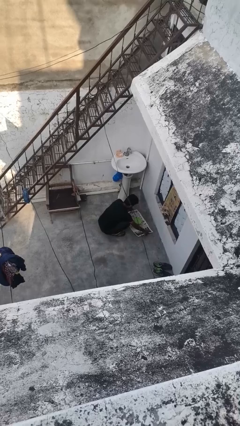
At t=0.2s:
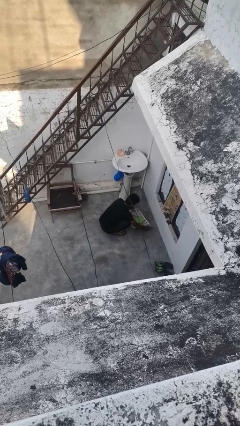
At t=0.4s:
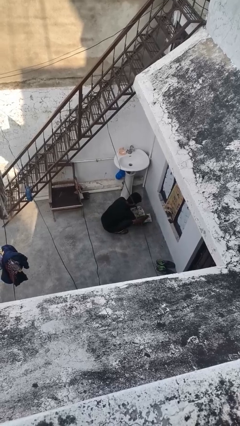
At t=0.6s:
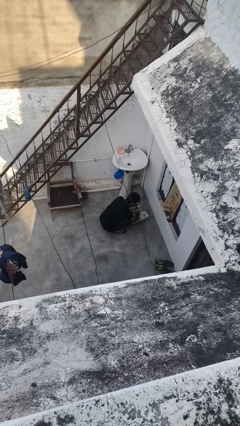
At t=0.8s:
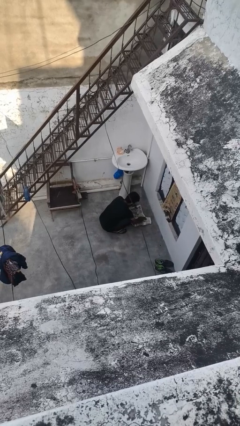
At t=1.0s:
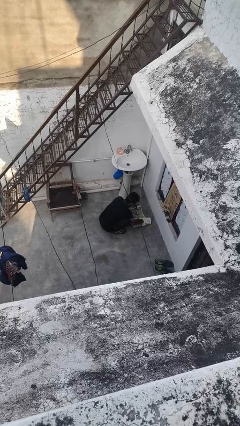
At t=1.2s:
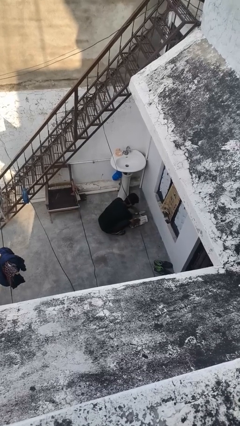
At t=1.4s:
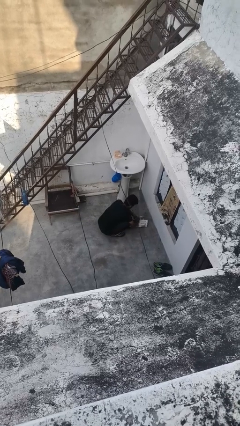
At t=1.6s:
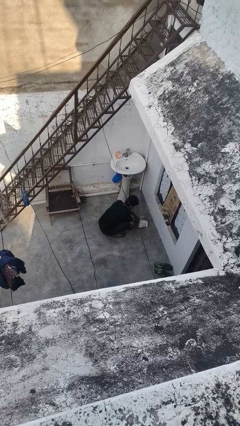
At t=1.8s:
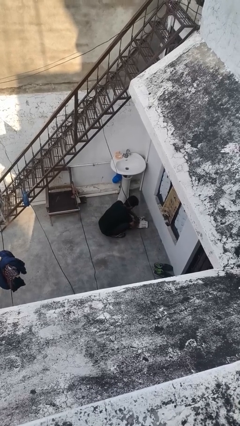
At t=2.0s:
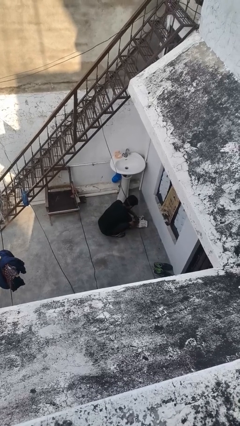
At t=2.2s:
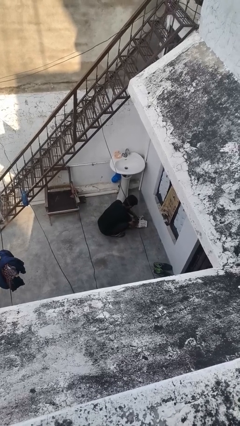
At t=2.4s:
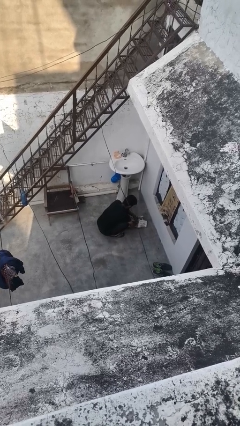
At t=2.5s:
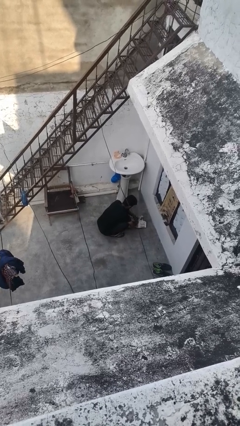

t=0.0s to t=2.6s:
person wraps box

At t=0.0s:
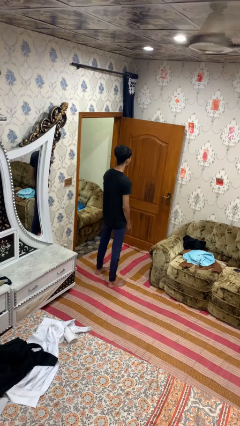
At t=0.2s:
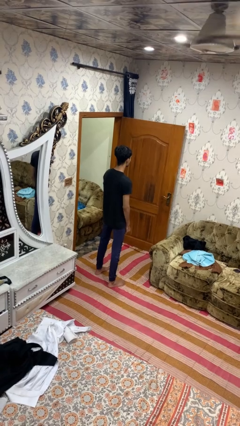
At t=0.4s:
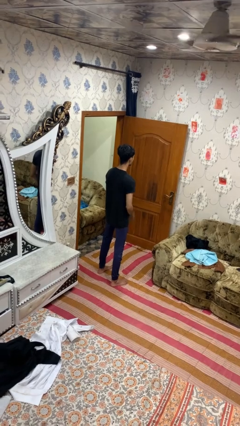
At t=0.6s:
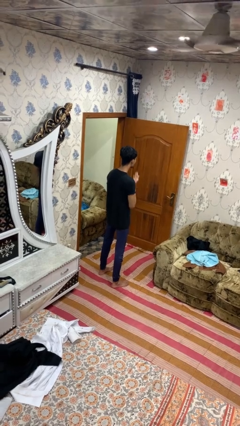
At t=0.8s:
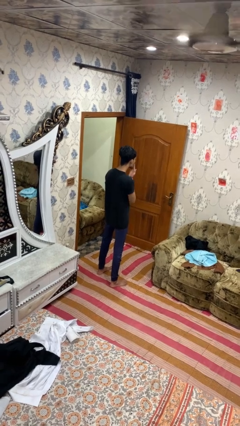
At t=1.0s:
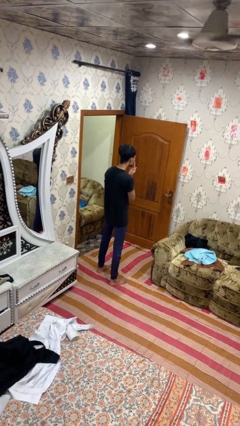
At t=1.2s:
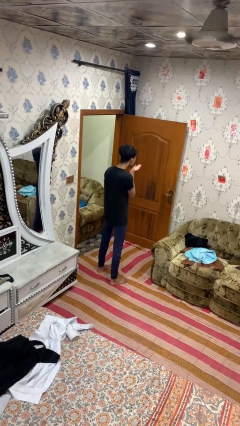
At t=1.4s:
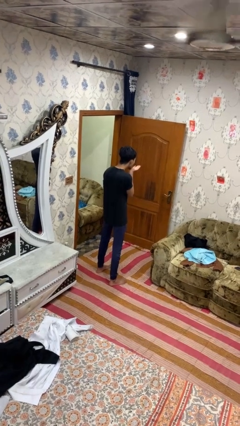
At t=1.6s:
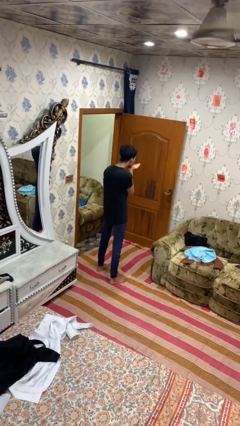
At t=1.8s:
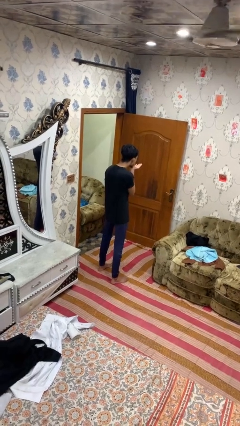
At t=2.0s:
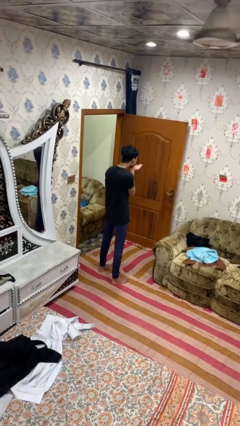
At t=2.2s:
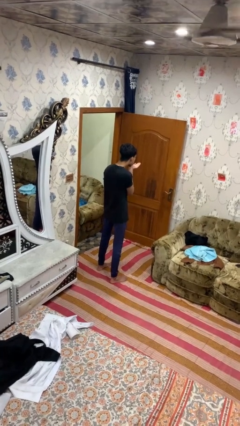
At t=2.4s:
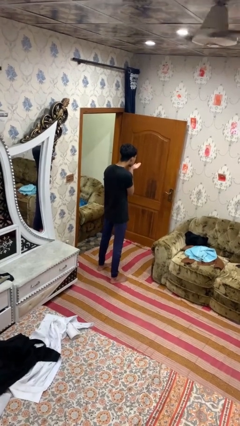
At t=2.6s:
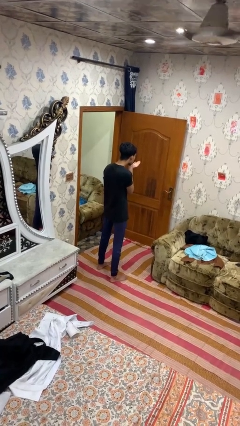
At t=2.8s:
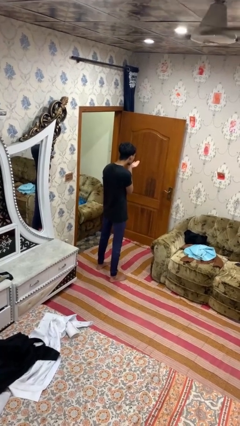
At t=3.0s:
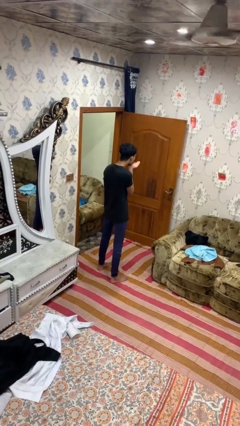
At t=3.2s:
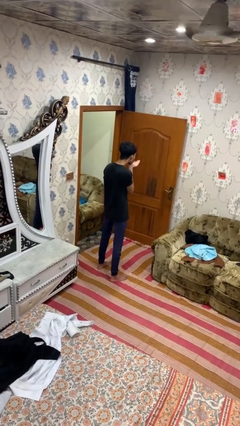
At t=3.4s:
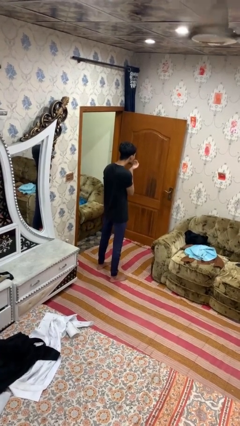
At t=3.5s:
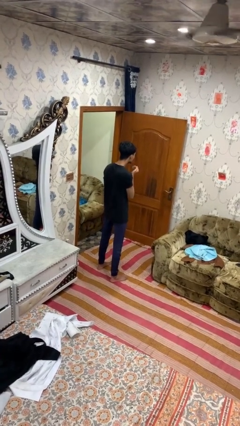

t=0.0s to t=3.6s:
person gestures blow kiss

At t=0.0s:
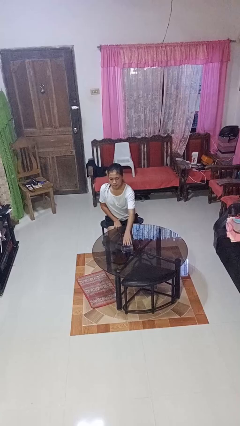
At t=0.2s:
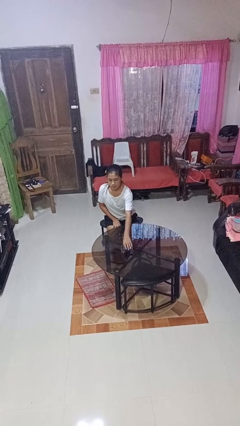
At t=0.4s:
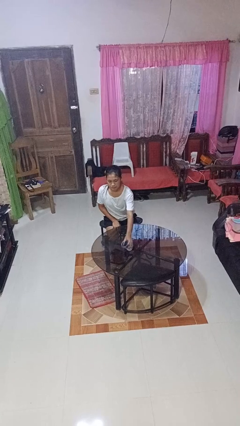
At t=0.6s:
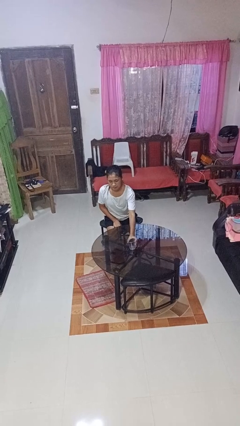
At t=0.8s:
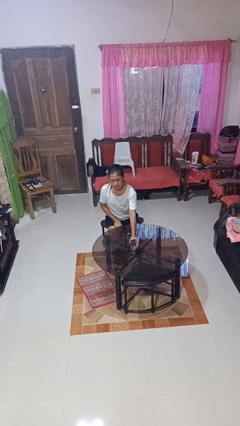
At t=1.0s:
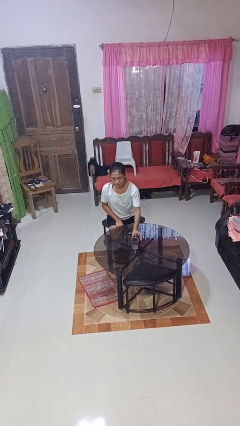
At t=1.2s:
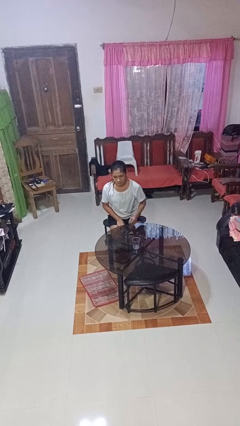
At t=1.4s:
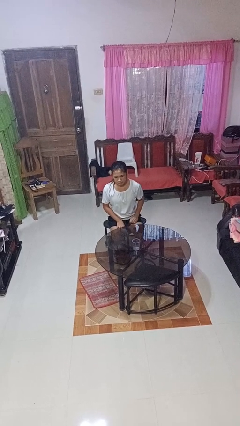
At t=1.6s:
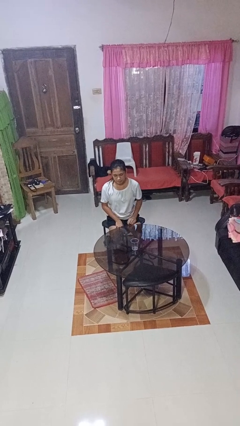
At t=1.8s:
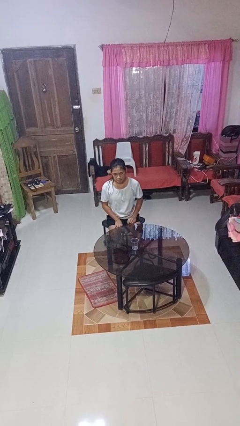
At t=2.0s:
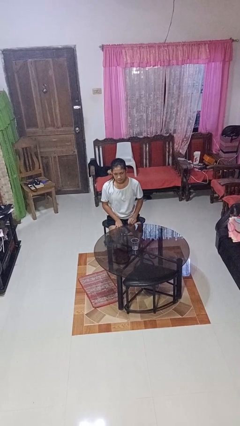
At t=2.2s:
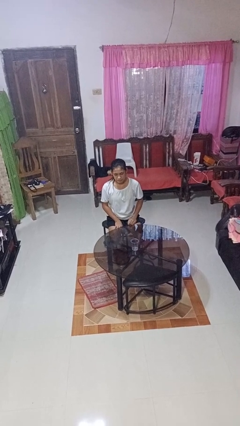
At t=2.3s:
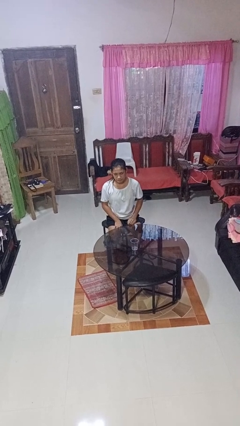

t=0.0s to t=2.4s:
person sets upright glass

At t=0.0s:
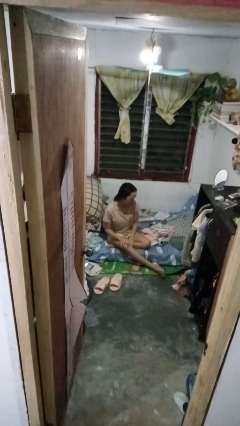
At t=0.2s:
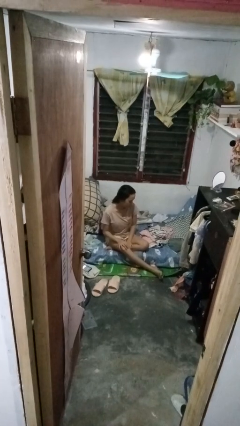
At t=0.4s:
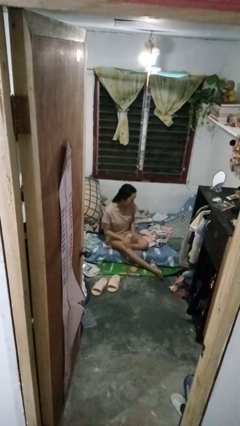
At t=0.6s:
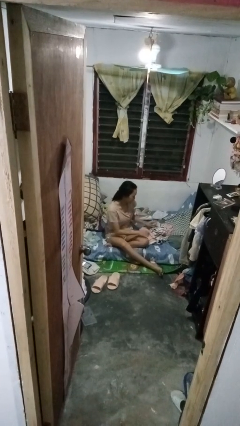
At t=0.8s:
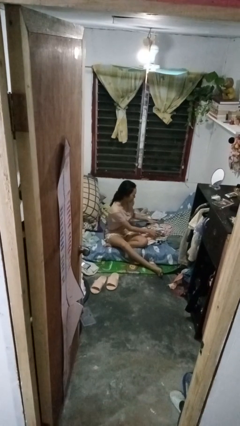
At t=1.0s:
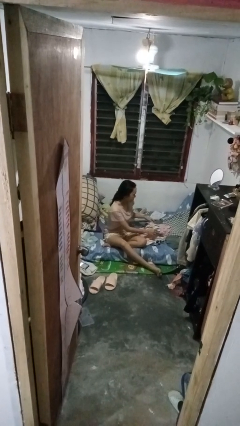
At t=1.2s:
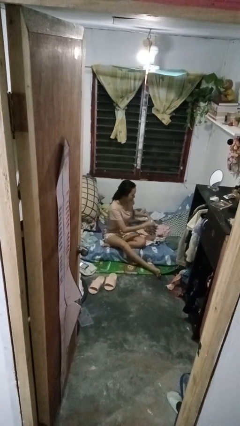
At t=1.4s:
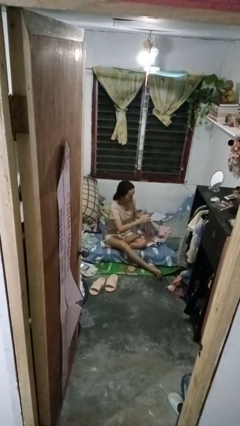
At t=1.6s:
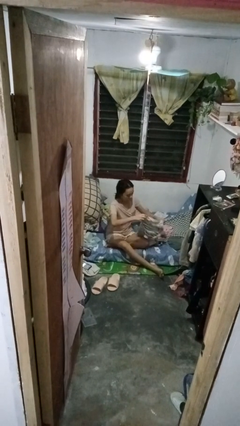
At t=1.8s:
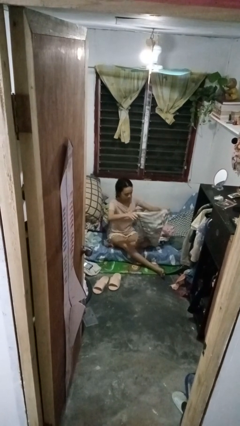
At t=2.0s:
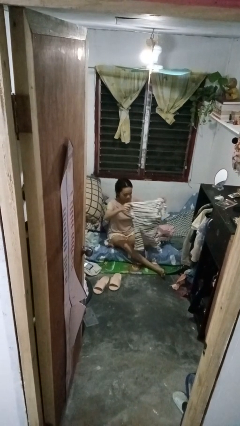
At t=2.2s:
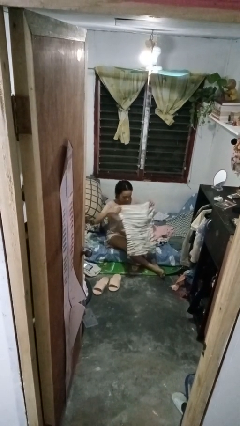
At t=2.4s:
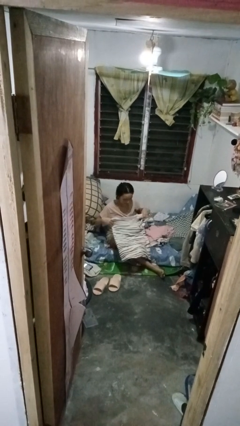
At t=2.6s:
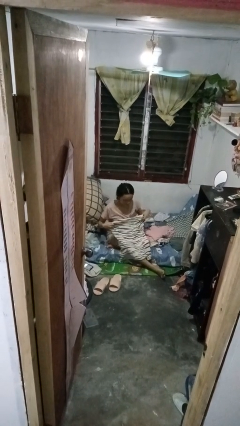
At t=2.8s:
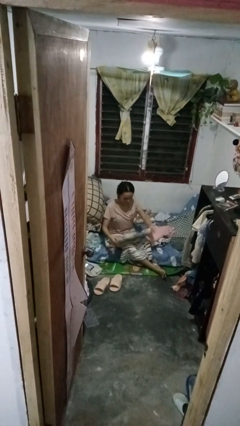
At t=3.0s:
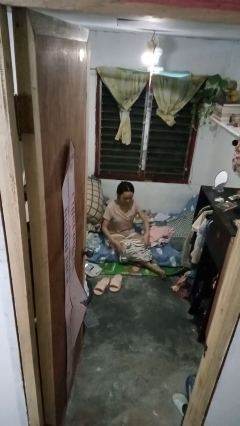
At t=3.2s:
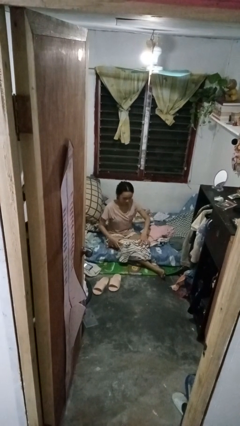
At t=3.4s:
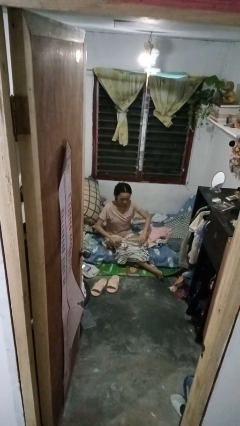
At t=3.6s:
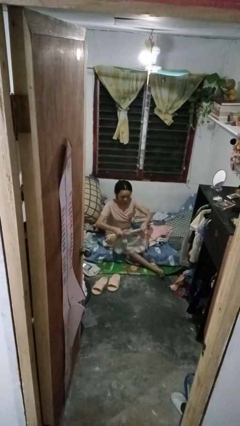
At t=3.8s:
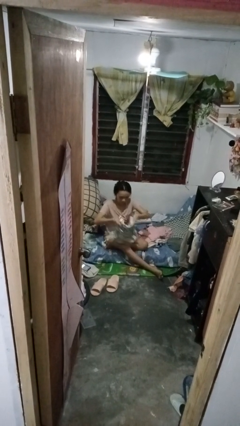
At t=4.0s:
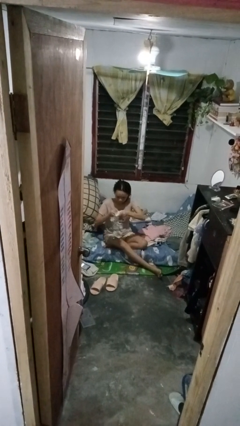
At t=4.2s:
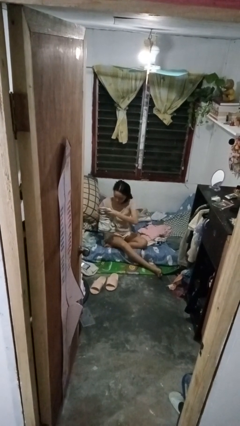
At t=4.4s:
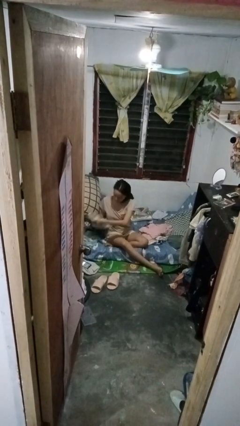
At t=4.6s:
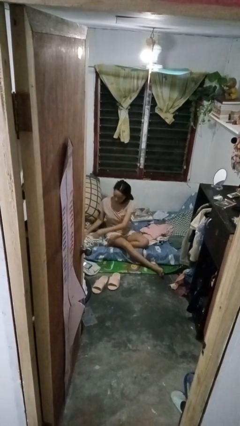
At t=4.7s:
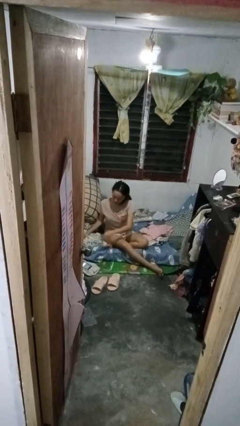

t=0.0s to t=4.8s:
person folds shirt

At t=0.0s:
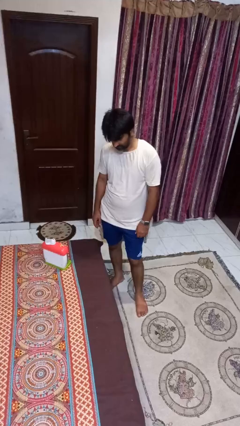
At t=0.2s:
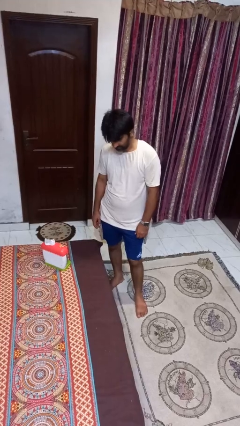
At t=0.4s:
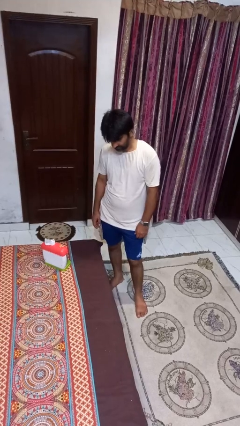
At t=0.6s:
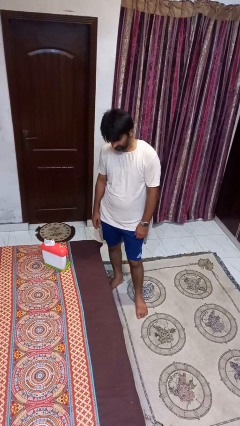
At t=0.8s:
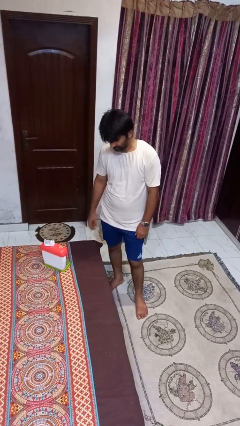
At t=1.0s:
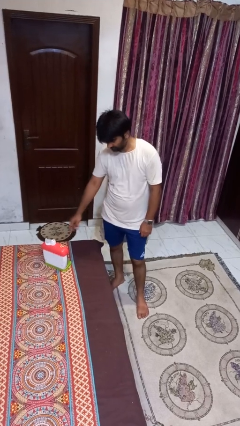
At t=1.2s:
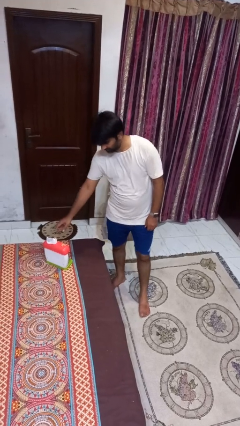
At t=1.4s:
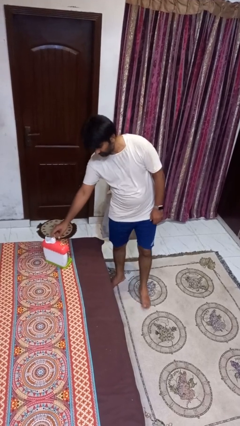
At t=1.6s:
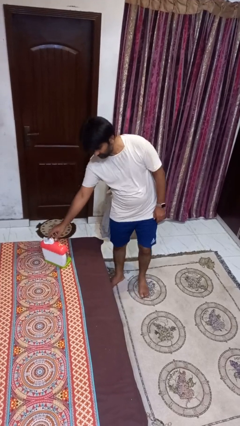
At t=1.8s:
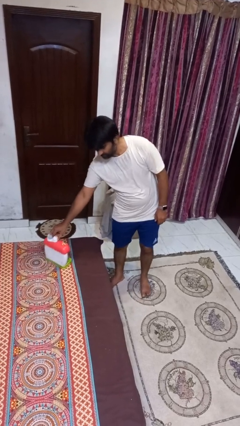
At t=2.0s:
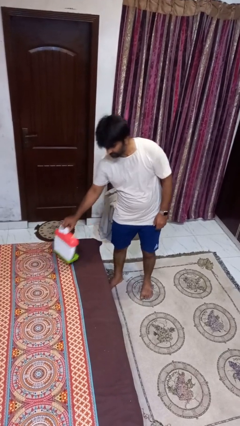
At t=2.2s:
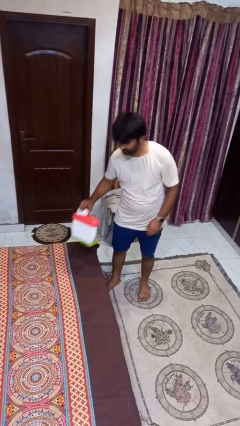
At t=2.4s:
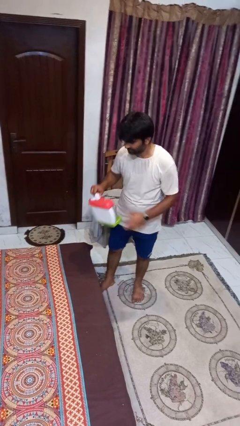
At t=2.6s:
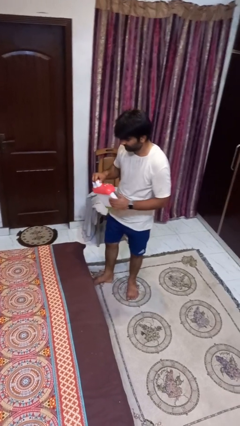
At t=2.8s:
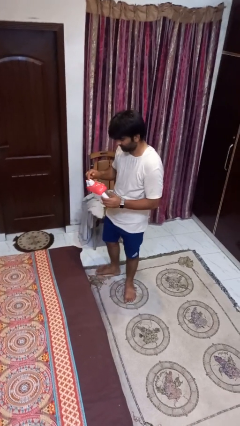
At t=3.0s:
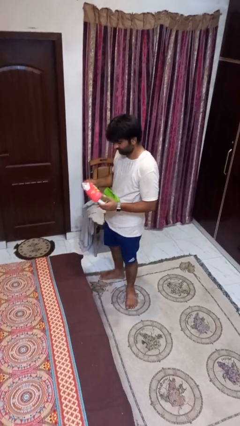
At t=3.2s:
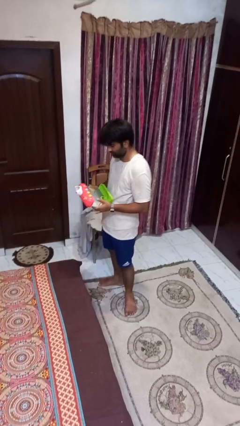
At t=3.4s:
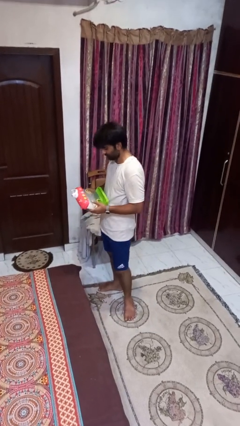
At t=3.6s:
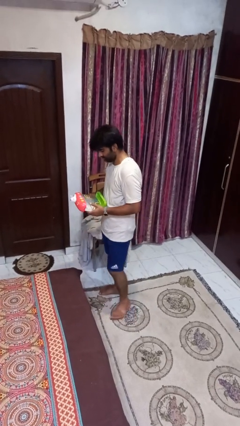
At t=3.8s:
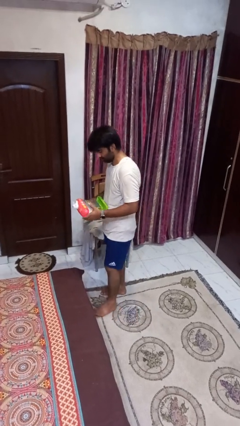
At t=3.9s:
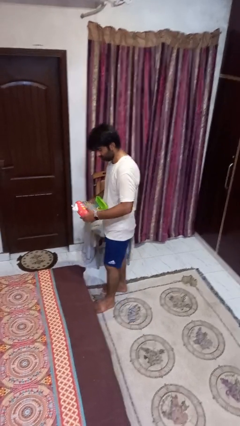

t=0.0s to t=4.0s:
person picks up object from bed

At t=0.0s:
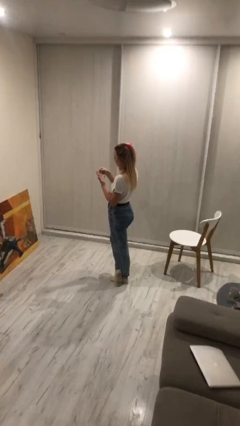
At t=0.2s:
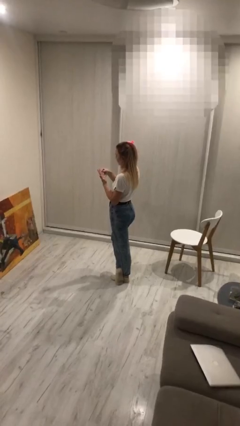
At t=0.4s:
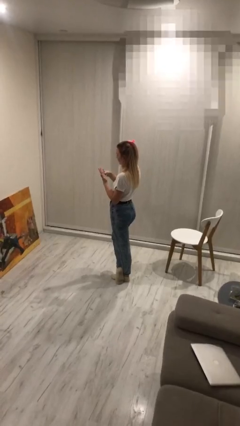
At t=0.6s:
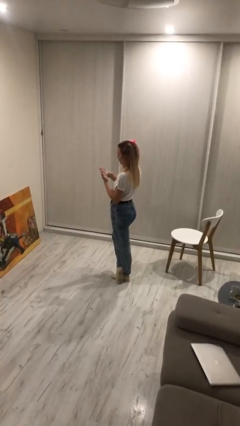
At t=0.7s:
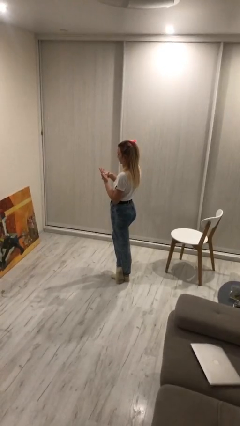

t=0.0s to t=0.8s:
person puts on ring
